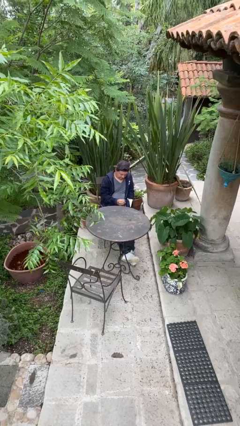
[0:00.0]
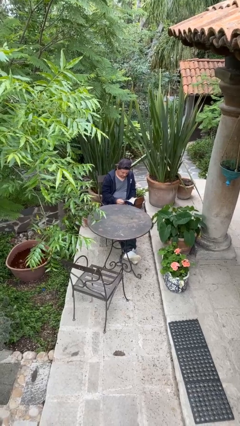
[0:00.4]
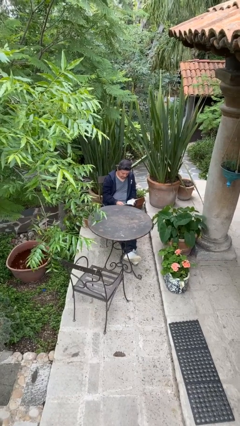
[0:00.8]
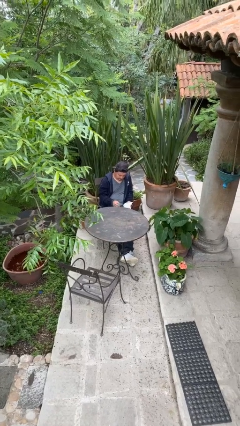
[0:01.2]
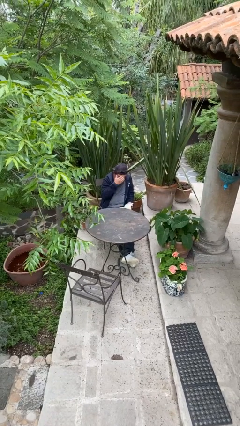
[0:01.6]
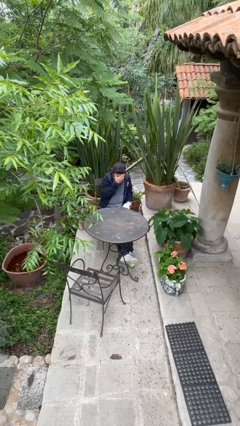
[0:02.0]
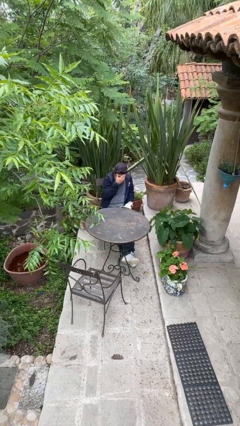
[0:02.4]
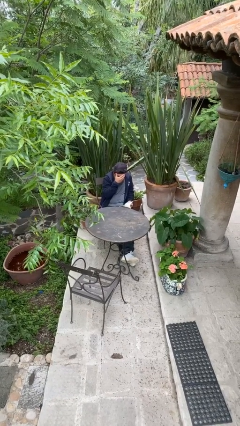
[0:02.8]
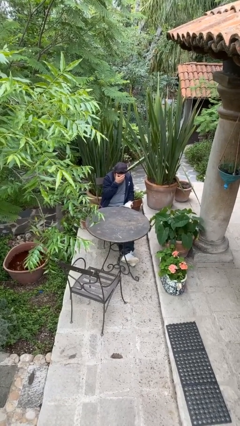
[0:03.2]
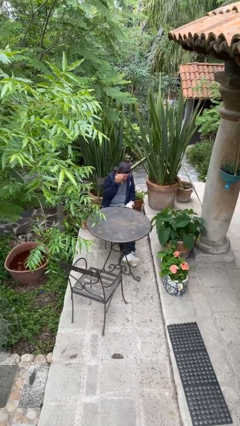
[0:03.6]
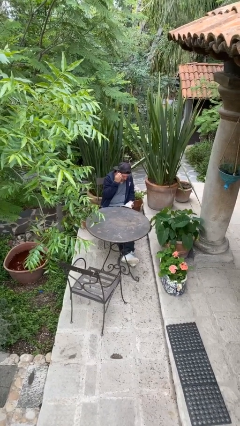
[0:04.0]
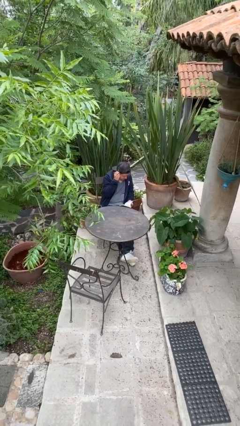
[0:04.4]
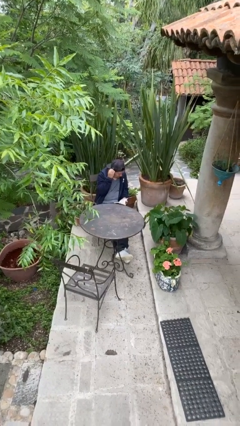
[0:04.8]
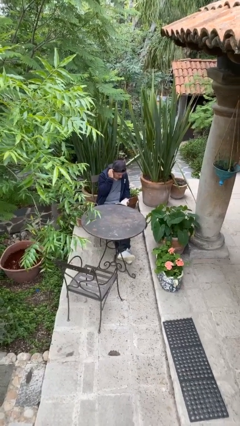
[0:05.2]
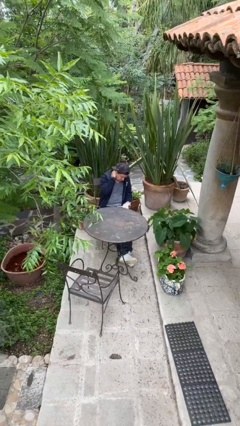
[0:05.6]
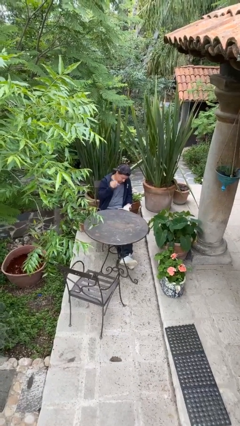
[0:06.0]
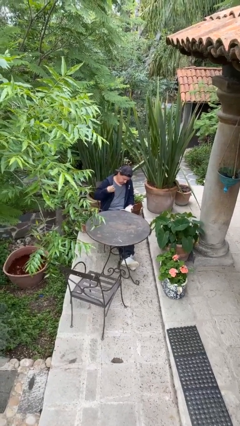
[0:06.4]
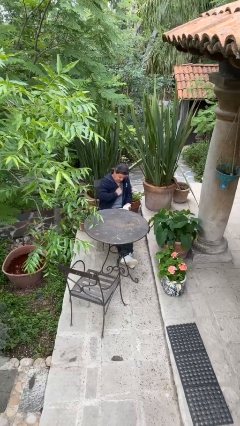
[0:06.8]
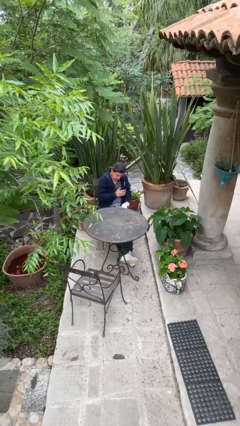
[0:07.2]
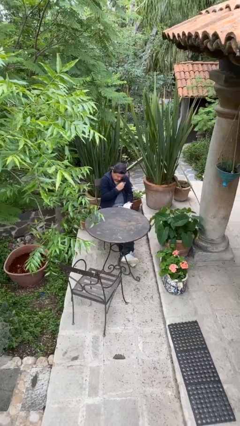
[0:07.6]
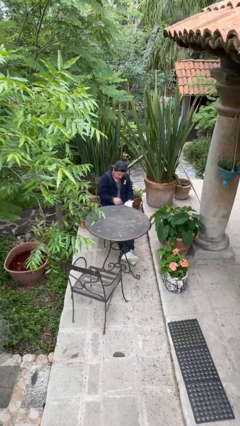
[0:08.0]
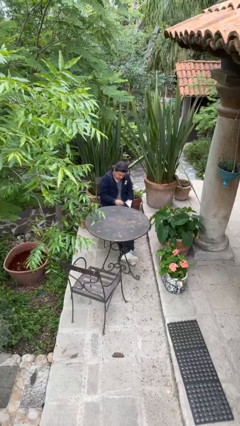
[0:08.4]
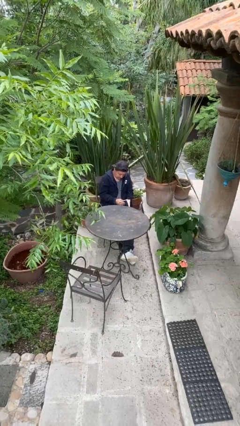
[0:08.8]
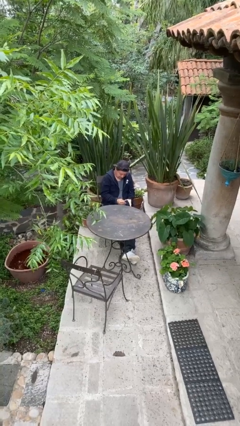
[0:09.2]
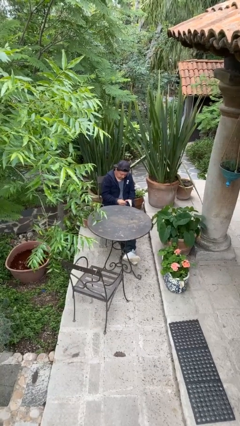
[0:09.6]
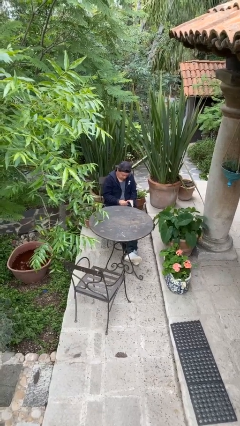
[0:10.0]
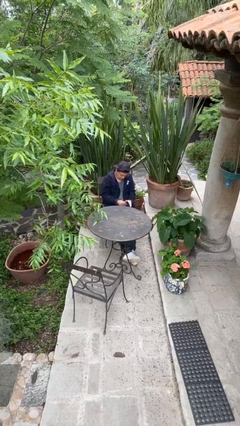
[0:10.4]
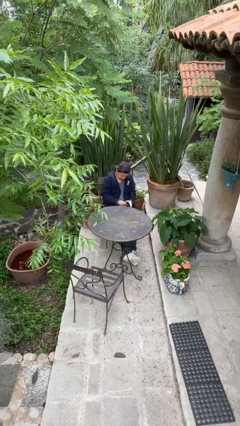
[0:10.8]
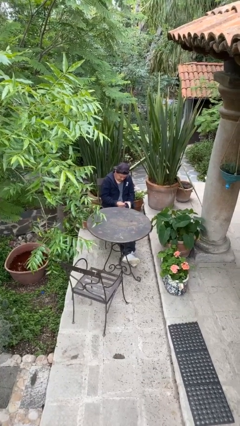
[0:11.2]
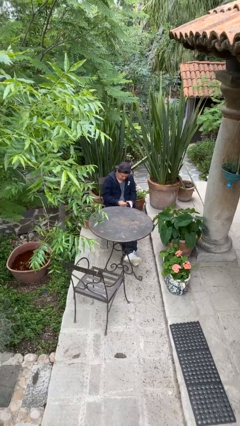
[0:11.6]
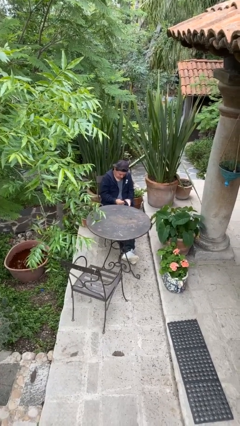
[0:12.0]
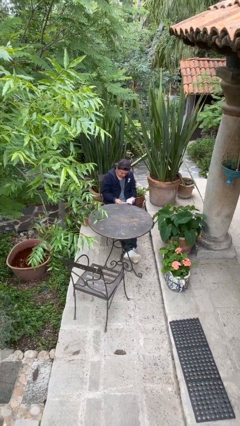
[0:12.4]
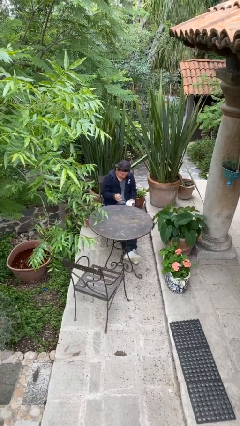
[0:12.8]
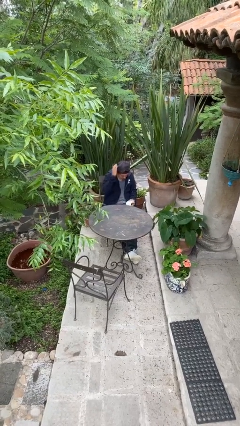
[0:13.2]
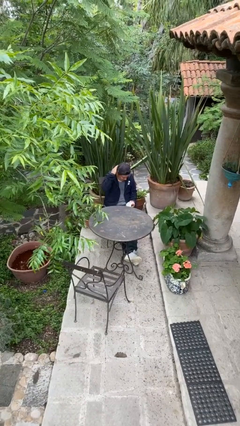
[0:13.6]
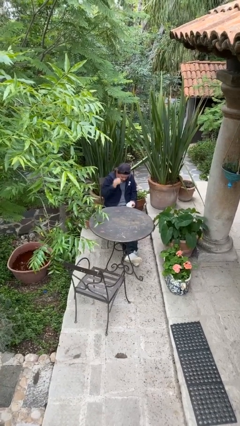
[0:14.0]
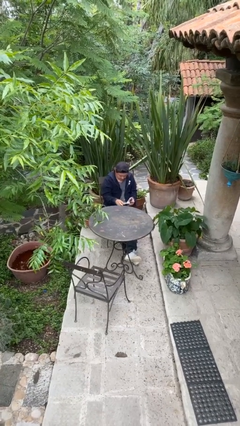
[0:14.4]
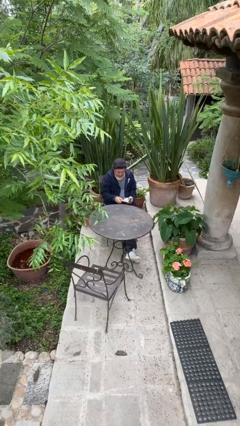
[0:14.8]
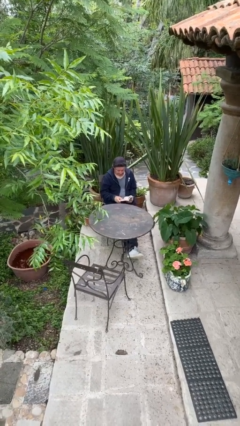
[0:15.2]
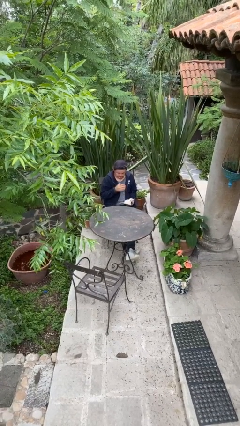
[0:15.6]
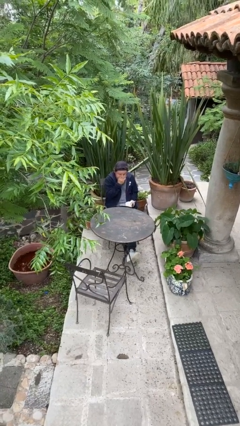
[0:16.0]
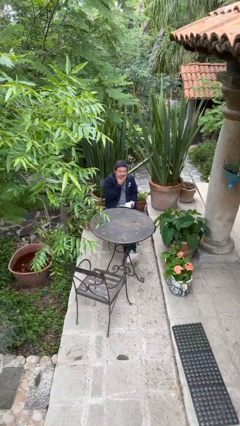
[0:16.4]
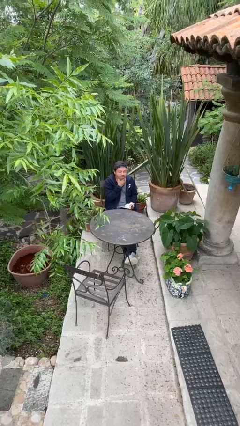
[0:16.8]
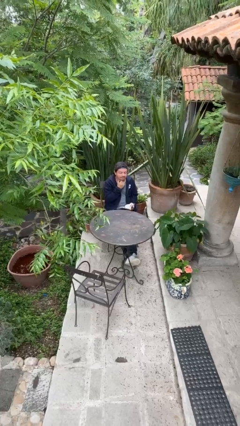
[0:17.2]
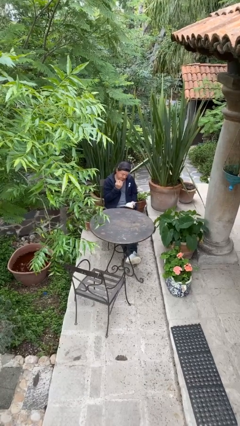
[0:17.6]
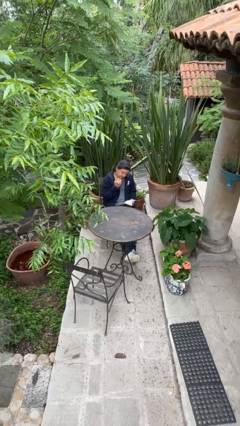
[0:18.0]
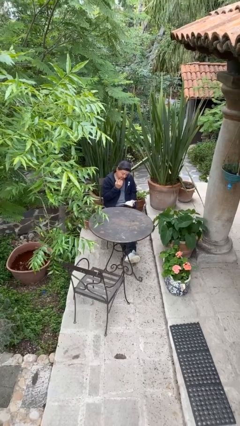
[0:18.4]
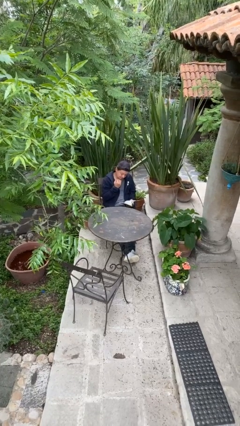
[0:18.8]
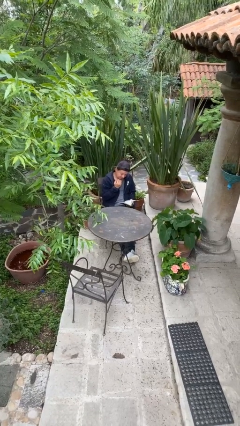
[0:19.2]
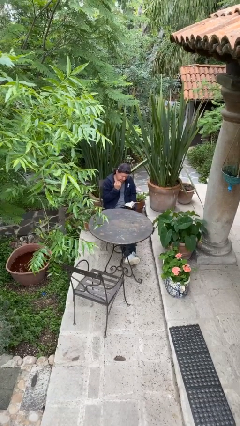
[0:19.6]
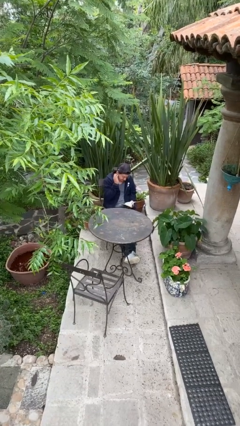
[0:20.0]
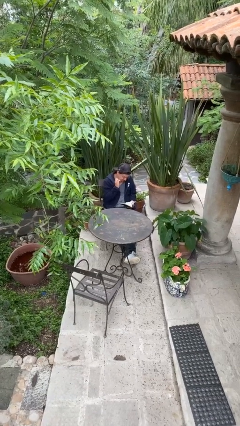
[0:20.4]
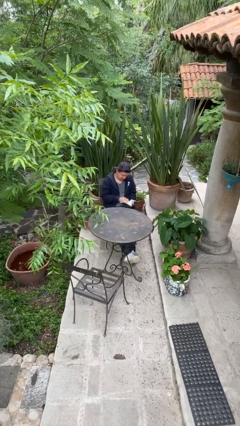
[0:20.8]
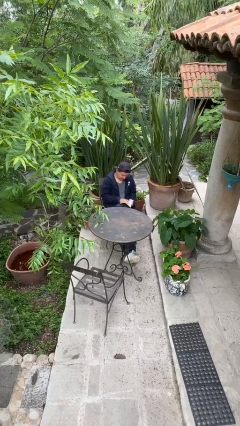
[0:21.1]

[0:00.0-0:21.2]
person reads document

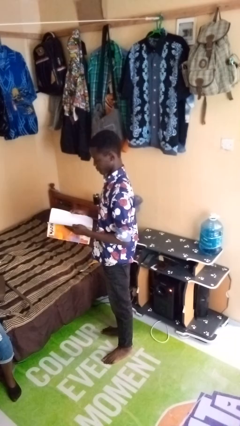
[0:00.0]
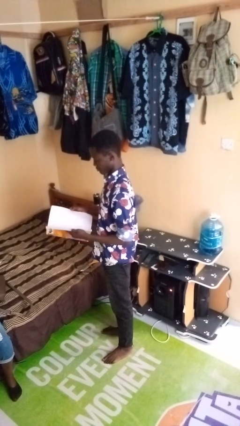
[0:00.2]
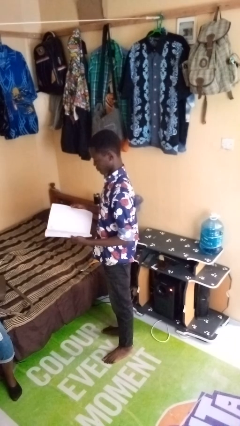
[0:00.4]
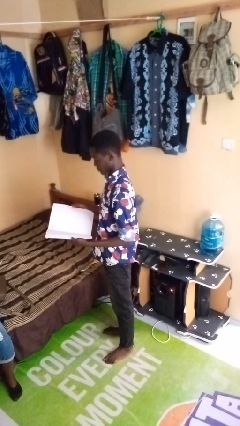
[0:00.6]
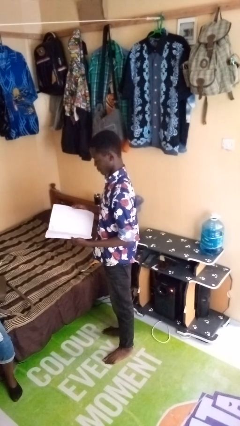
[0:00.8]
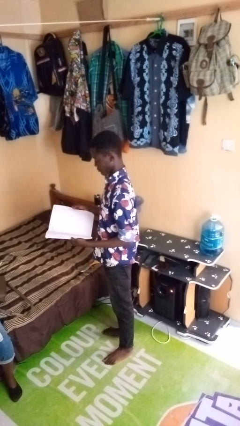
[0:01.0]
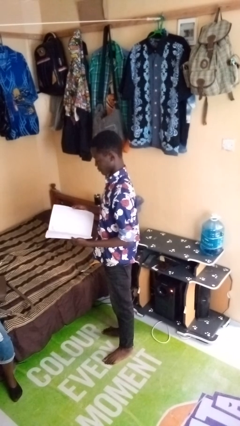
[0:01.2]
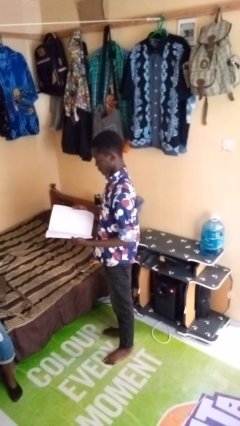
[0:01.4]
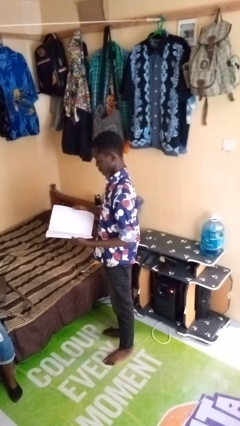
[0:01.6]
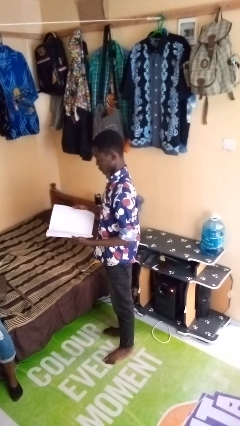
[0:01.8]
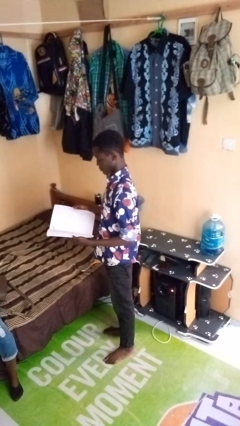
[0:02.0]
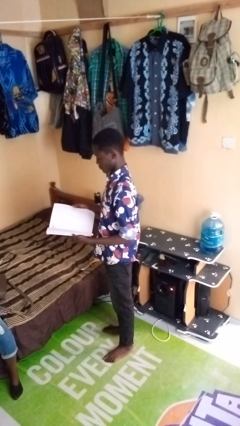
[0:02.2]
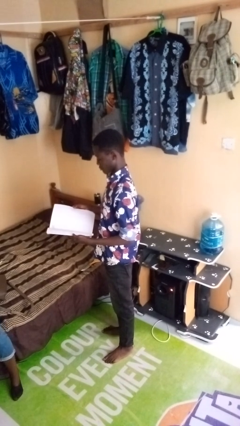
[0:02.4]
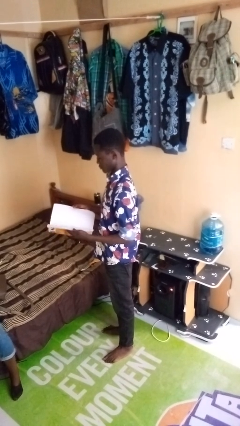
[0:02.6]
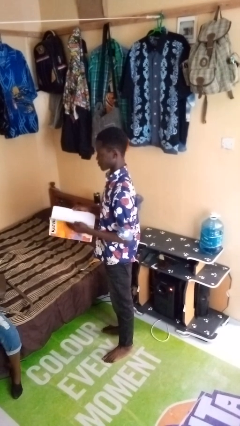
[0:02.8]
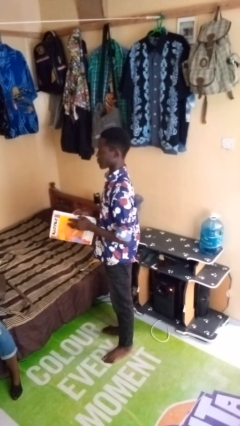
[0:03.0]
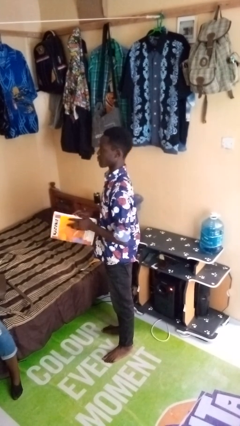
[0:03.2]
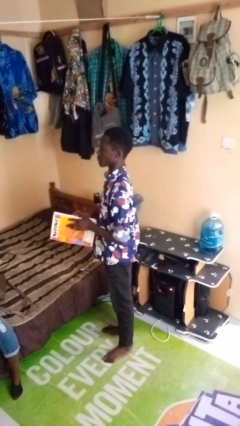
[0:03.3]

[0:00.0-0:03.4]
person reads book

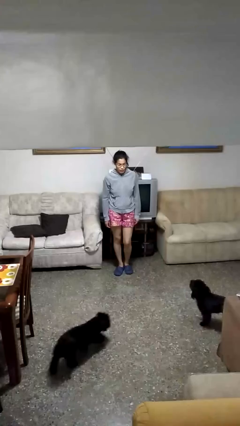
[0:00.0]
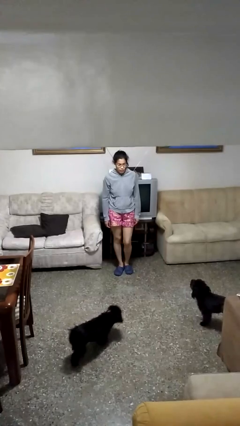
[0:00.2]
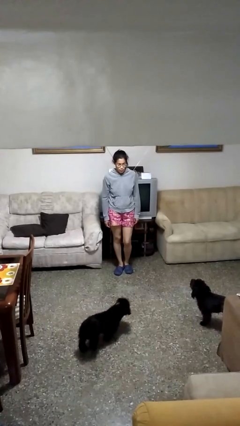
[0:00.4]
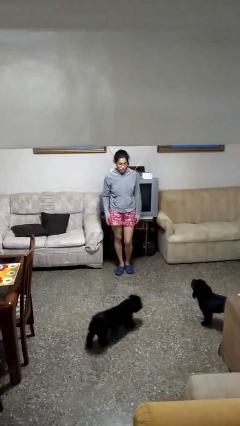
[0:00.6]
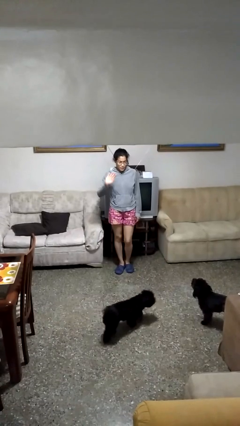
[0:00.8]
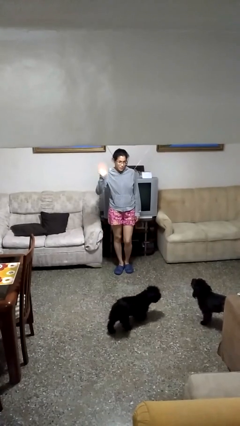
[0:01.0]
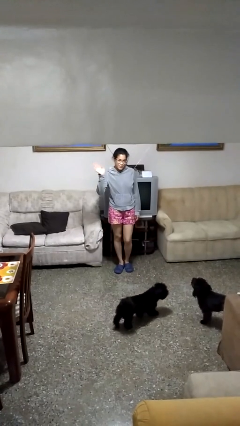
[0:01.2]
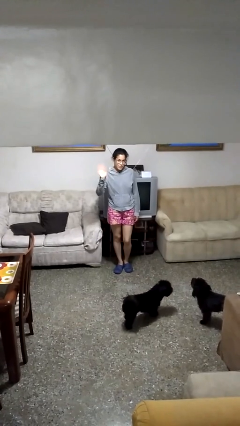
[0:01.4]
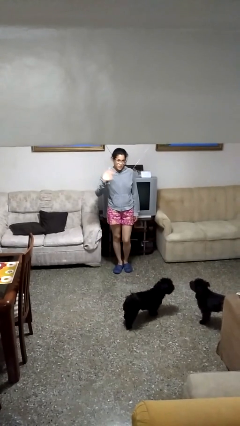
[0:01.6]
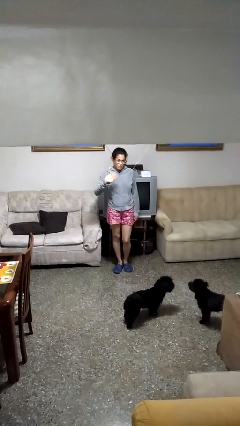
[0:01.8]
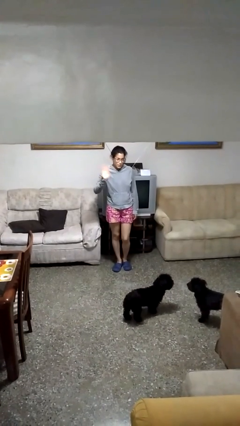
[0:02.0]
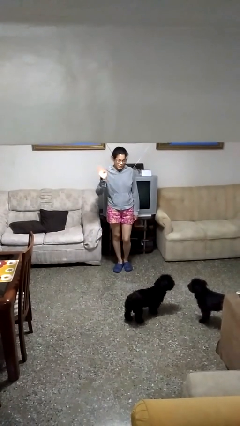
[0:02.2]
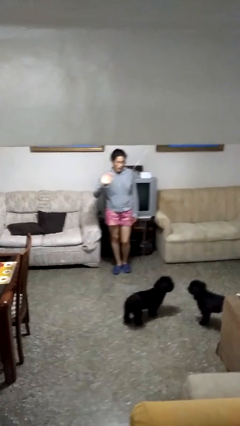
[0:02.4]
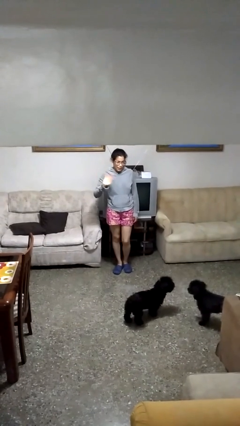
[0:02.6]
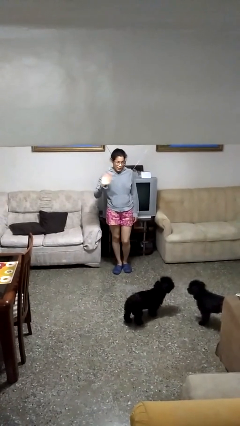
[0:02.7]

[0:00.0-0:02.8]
person waves at person

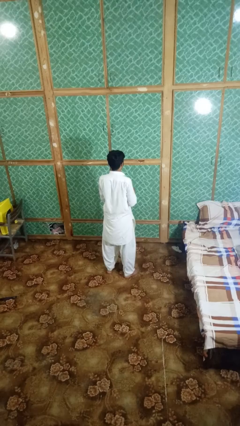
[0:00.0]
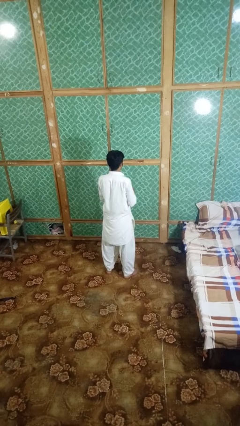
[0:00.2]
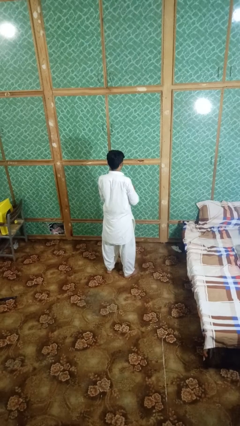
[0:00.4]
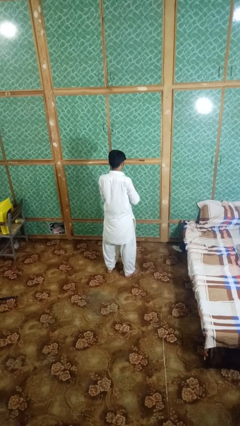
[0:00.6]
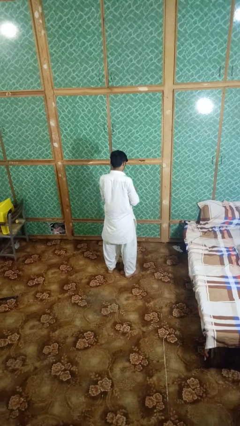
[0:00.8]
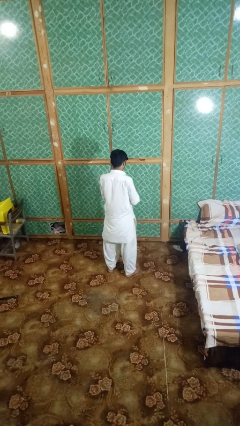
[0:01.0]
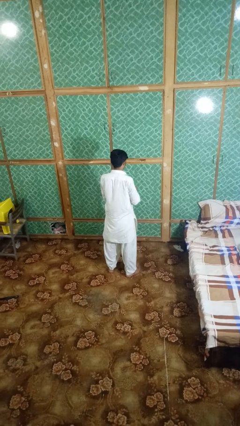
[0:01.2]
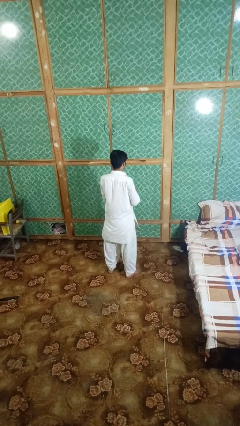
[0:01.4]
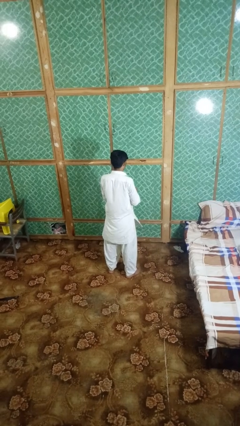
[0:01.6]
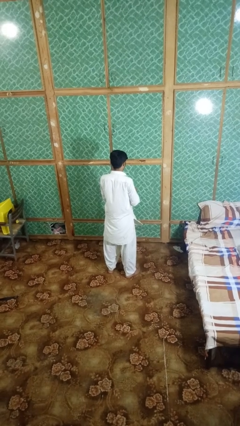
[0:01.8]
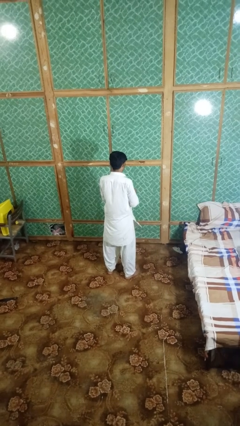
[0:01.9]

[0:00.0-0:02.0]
person opens beverage can
